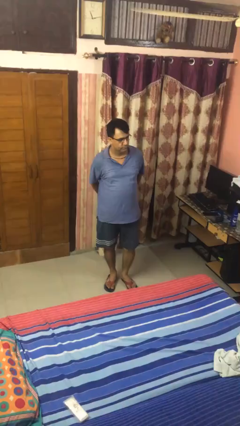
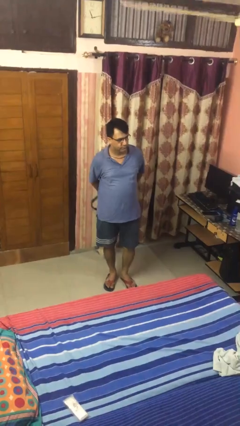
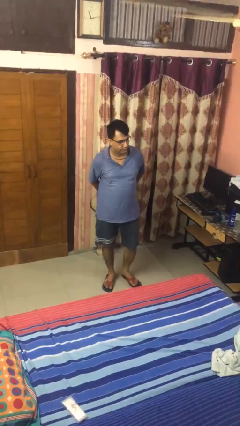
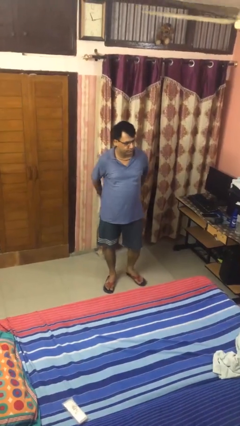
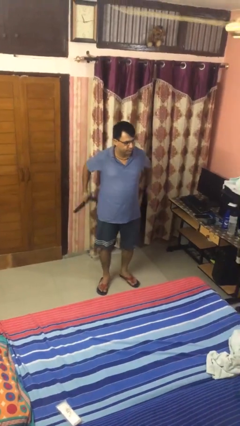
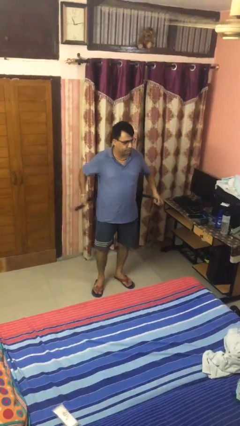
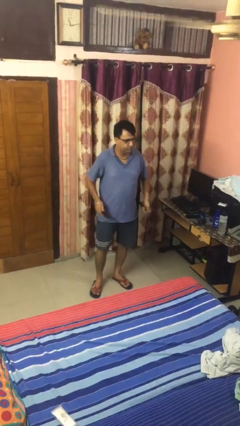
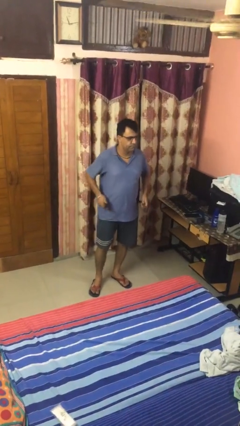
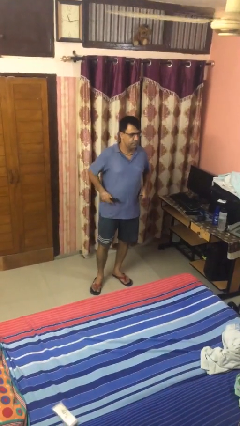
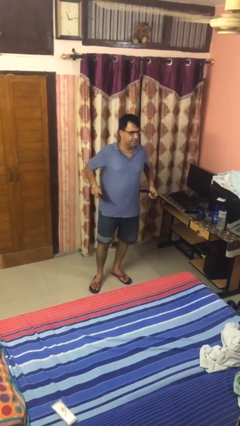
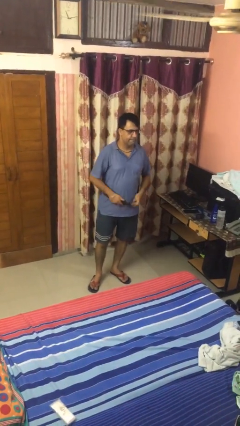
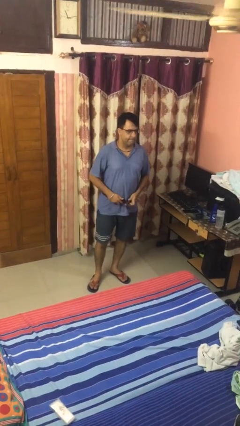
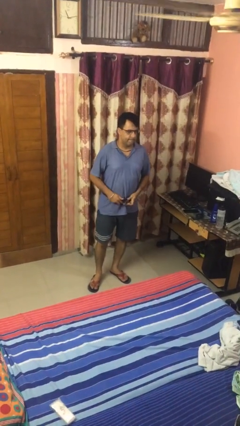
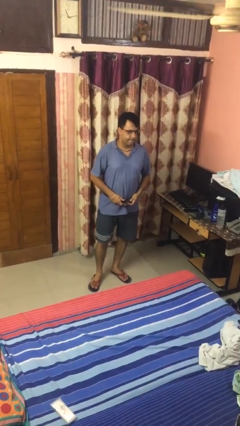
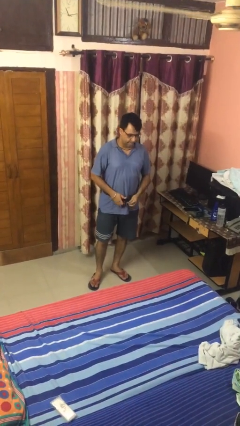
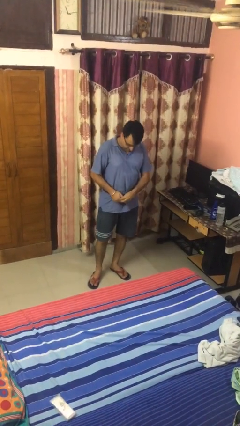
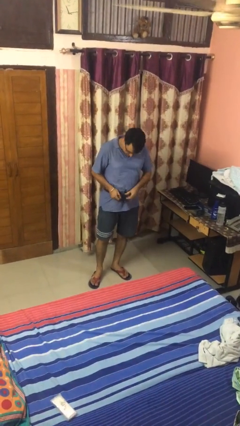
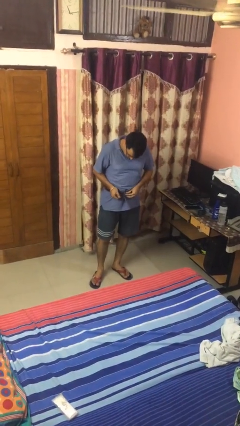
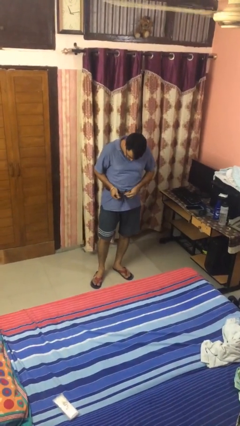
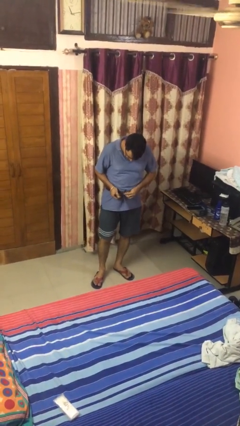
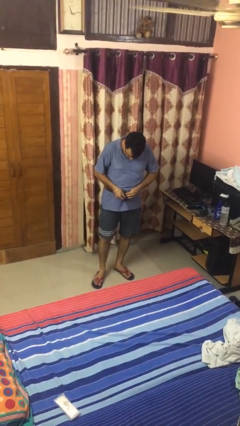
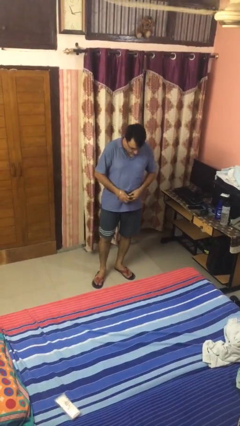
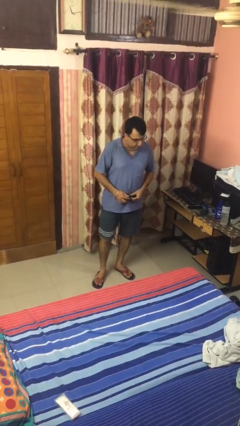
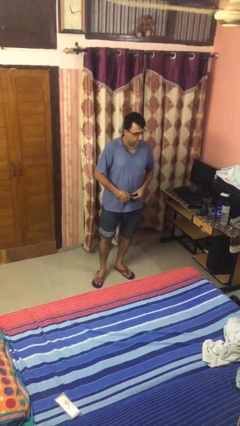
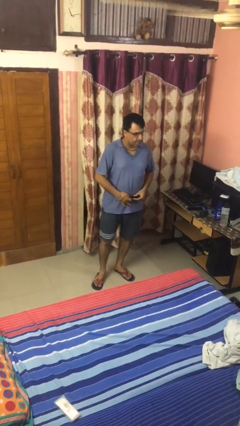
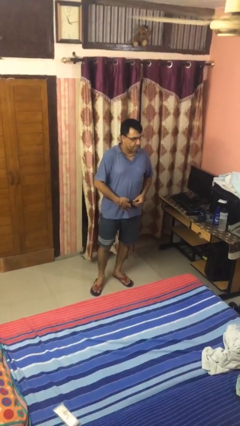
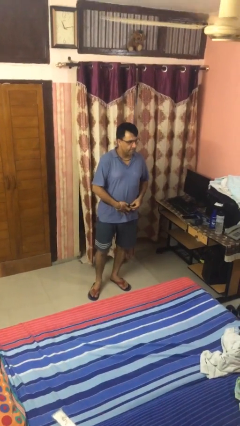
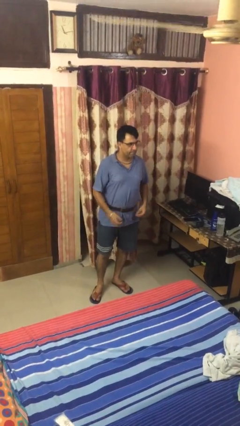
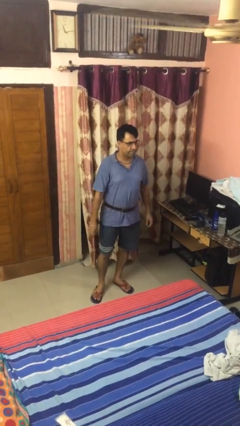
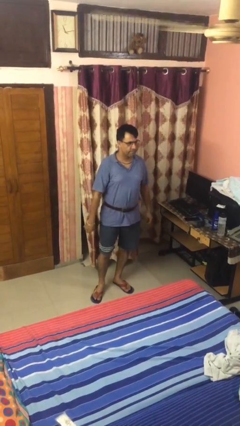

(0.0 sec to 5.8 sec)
person puts on belt

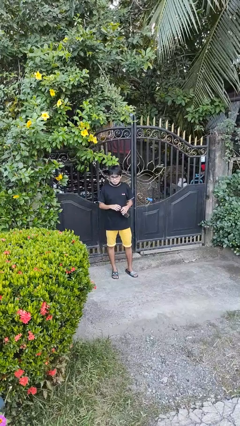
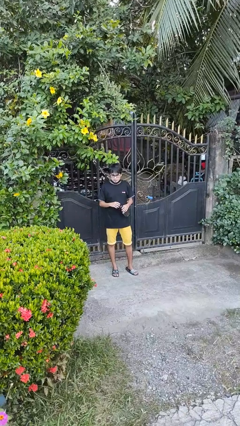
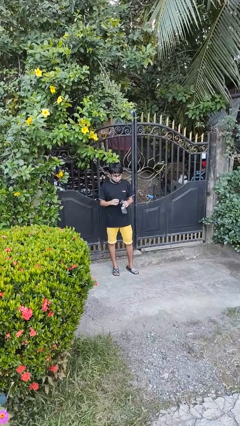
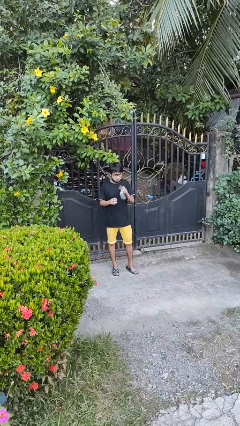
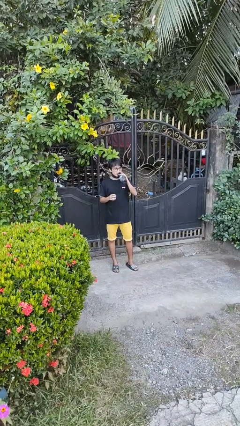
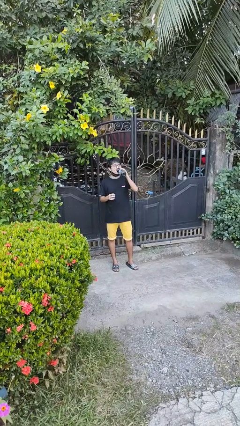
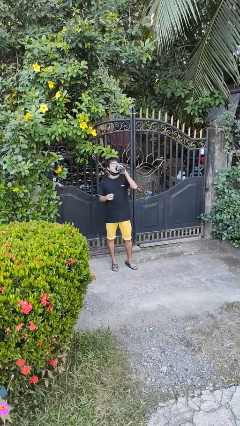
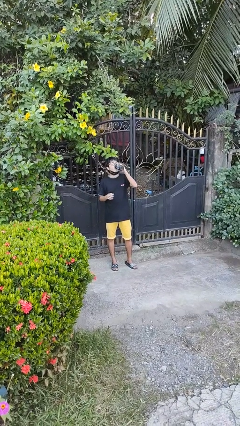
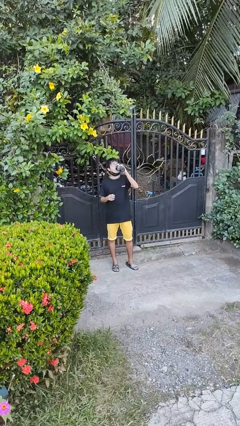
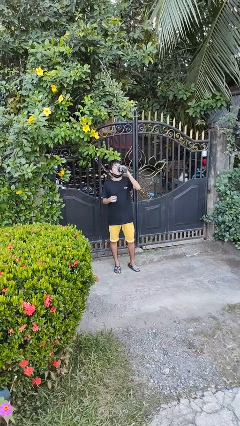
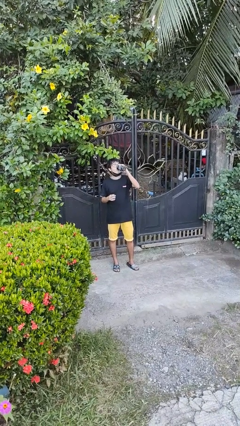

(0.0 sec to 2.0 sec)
person drinks from bottle

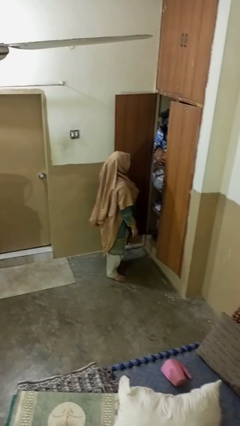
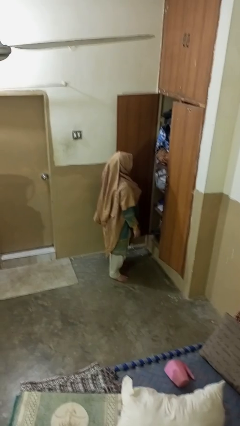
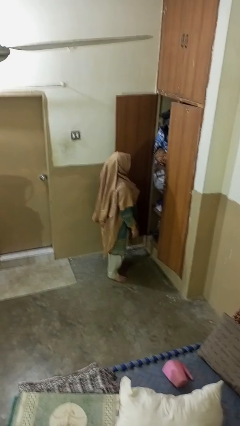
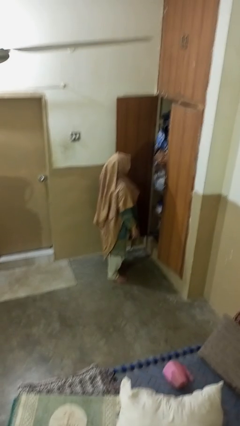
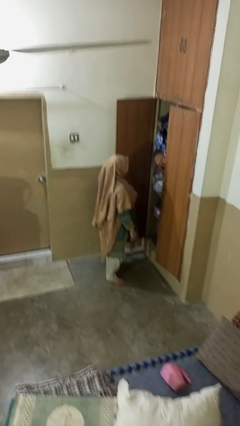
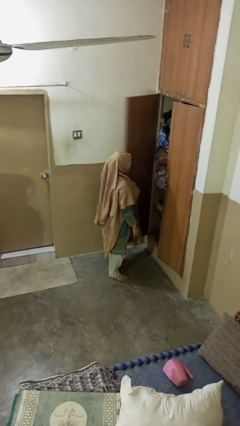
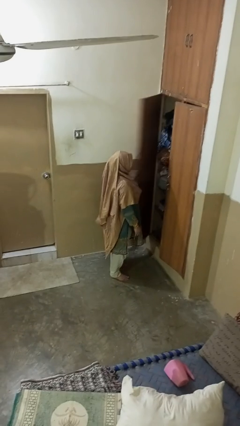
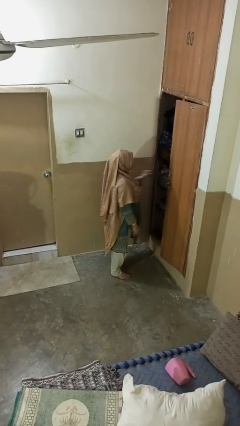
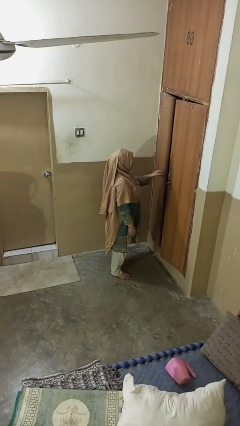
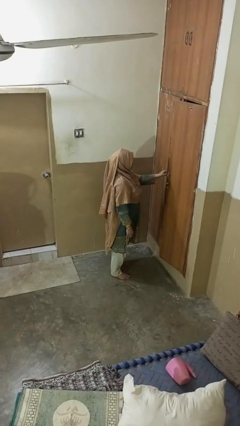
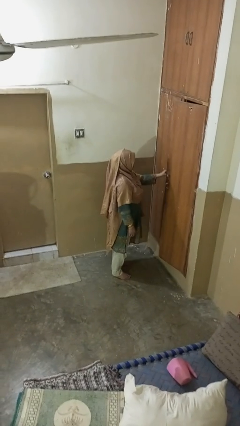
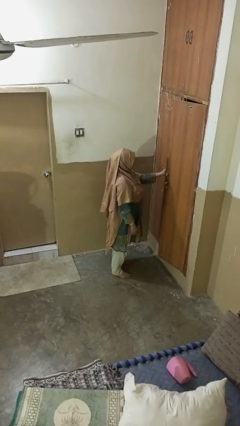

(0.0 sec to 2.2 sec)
person closes closet door

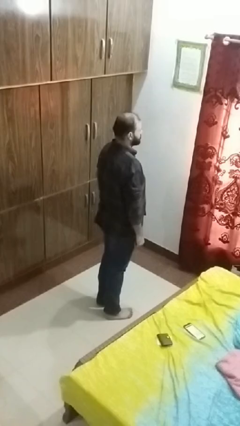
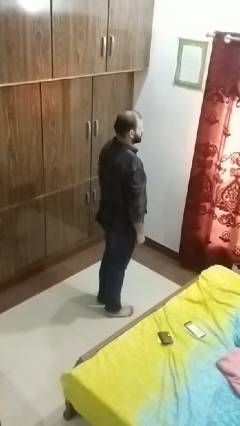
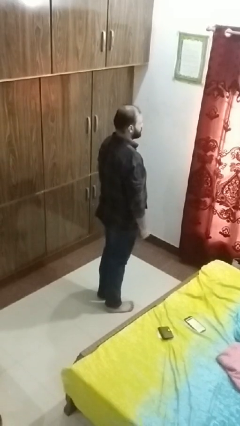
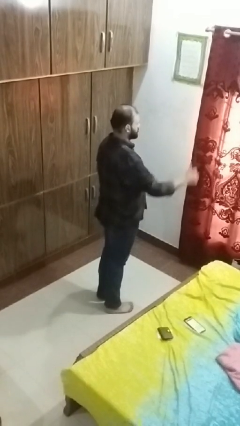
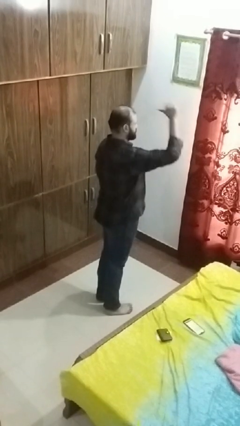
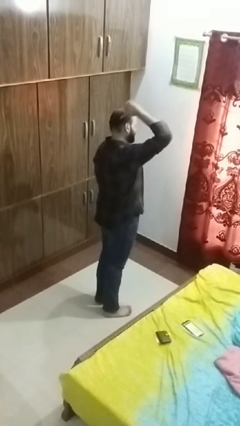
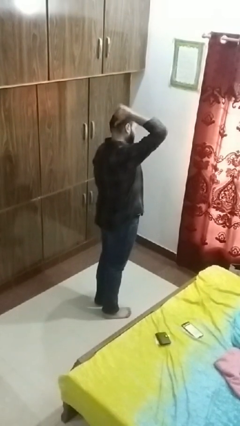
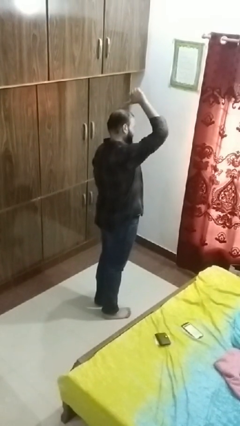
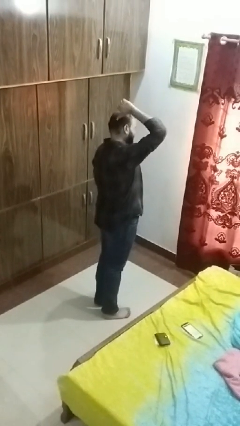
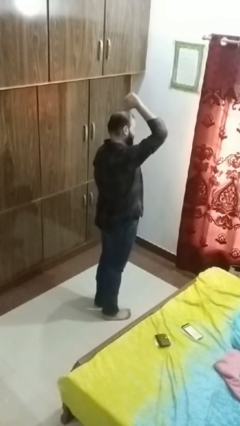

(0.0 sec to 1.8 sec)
person gestures behind me

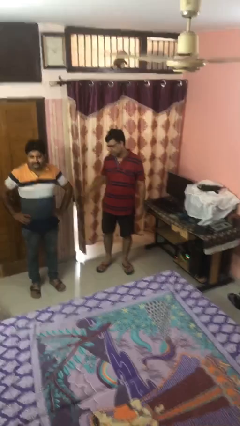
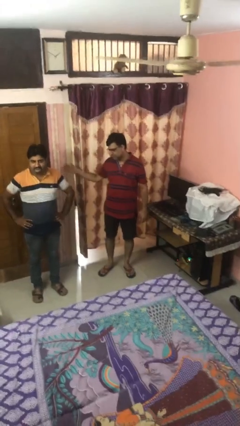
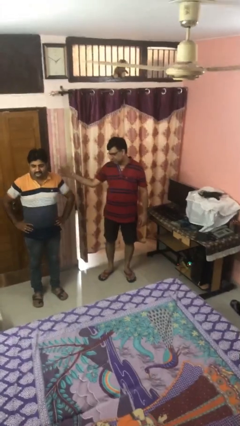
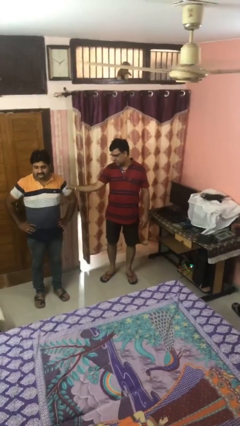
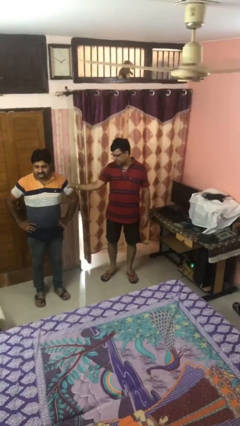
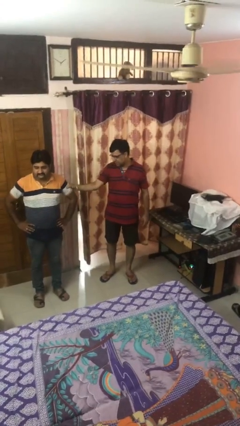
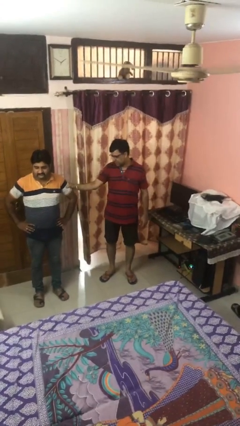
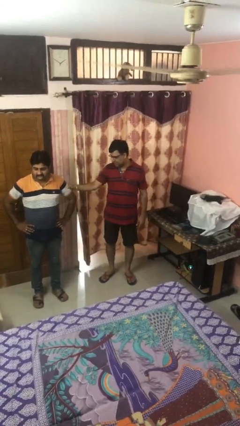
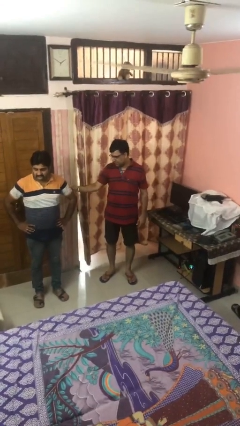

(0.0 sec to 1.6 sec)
person grabs person by bicep

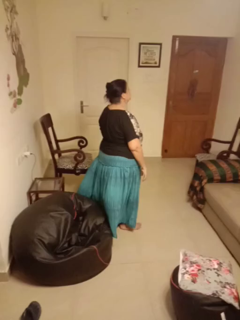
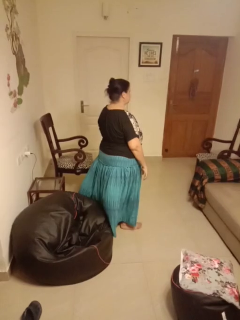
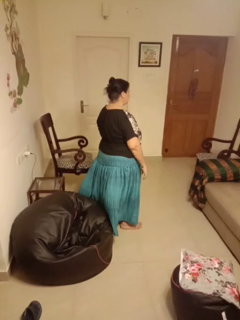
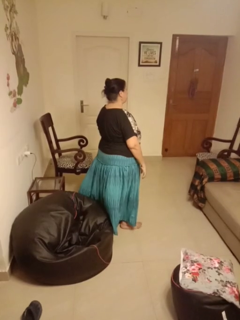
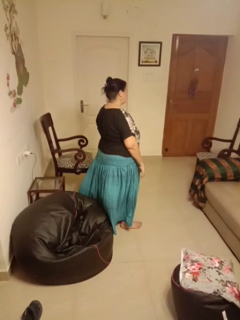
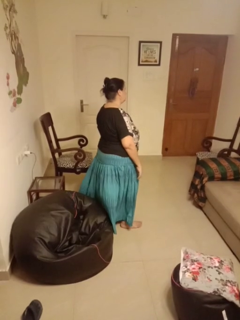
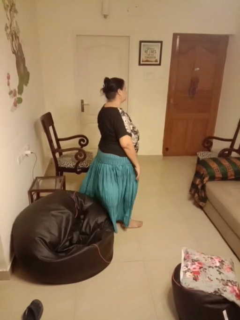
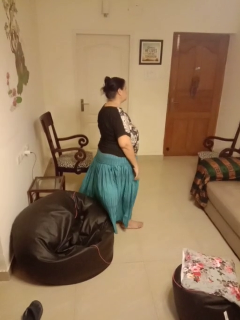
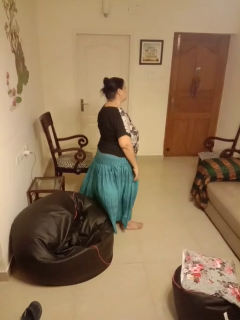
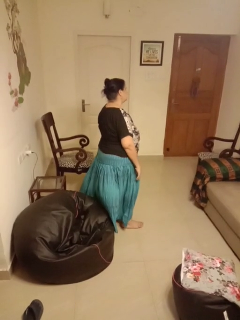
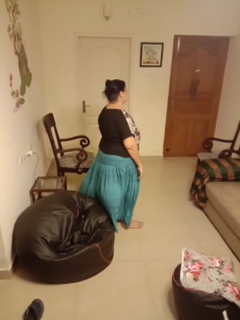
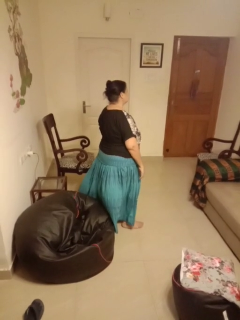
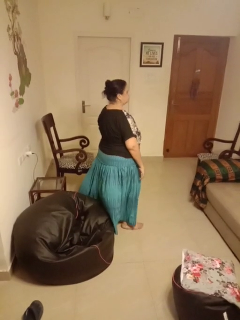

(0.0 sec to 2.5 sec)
person nods head

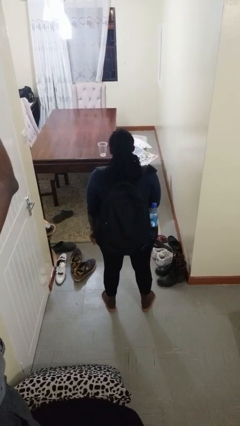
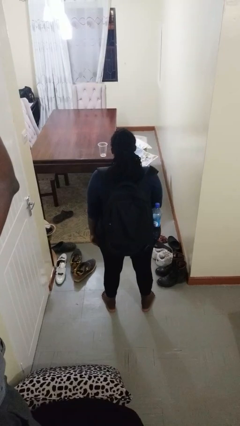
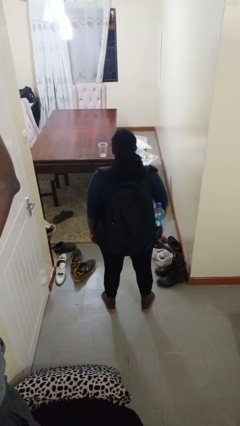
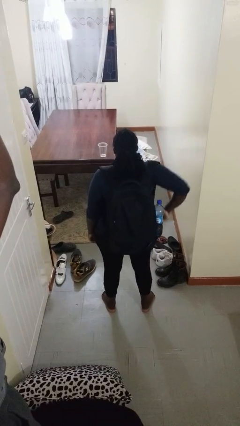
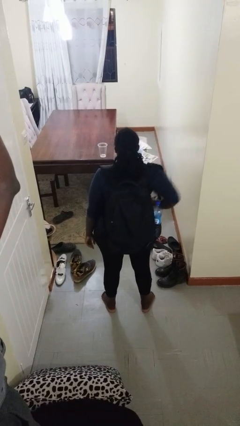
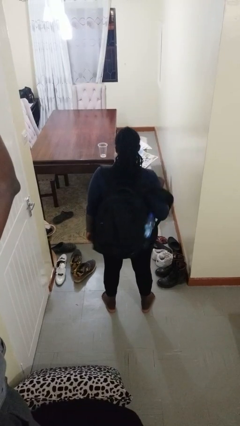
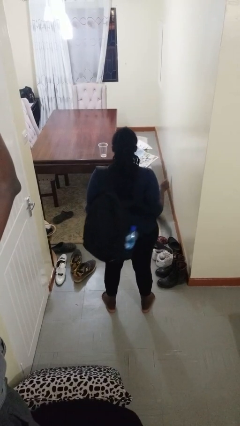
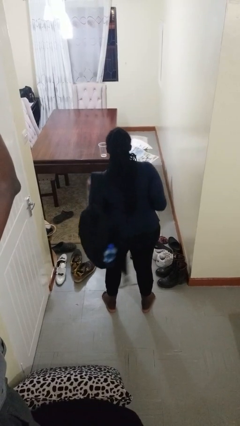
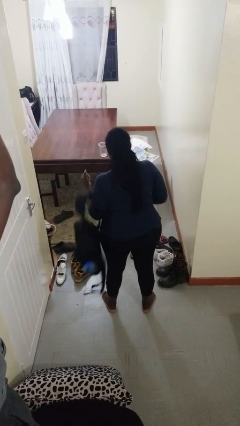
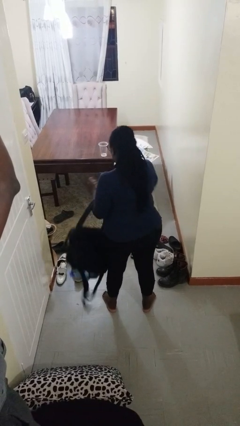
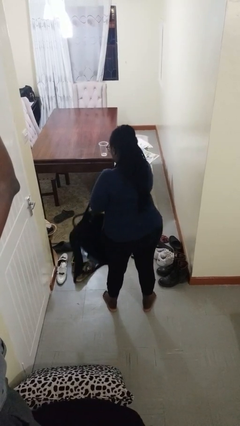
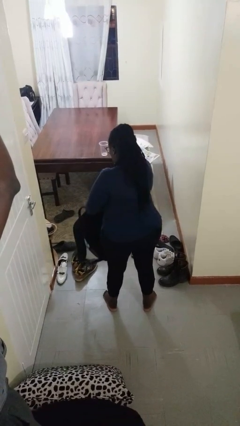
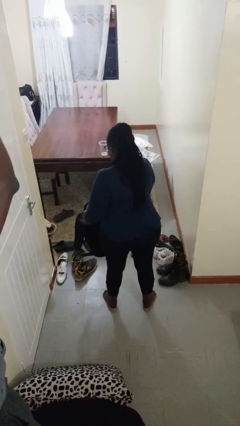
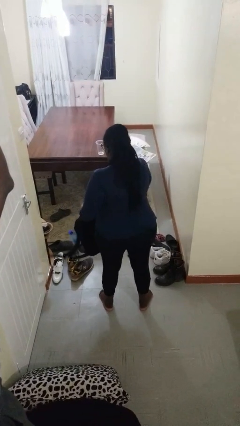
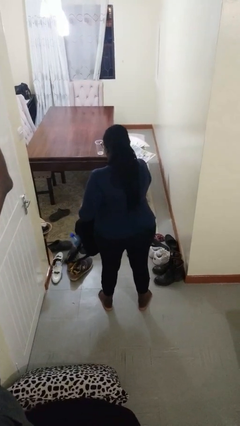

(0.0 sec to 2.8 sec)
person takes off backpack
